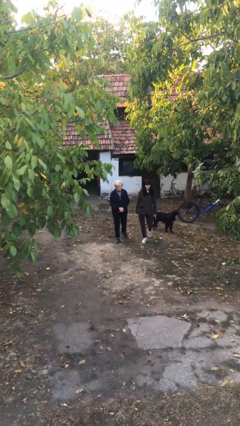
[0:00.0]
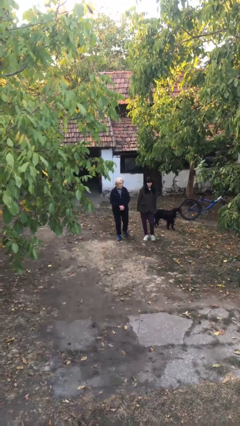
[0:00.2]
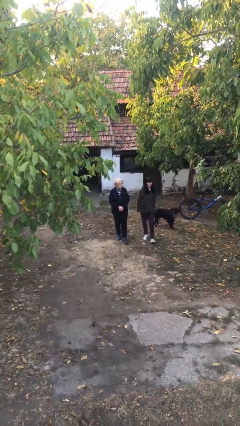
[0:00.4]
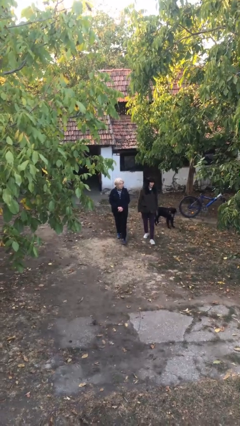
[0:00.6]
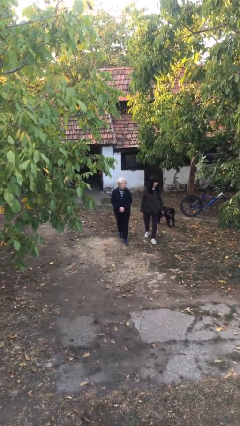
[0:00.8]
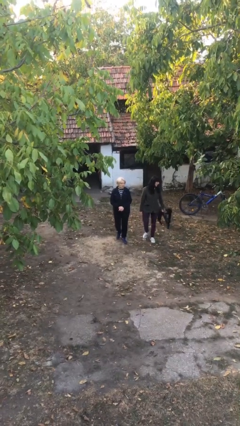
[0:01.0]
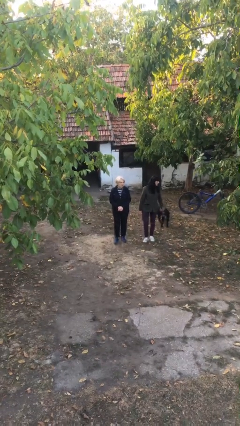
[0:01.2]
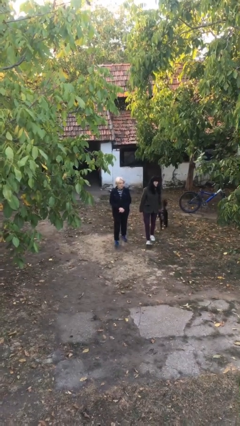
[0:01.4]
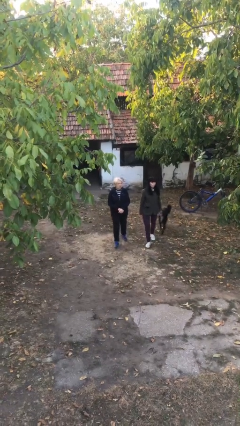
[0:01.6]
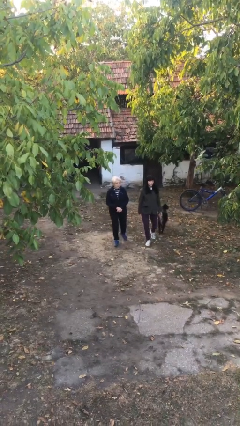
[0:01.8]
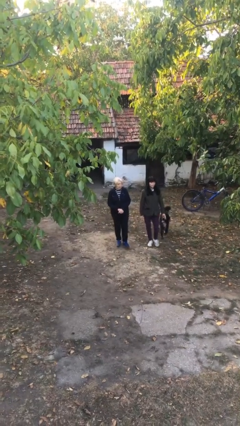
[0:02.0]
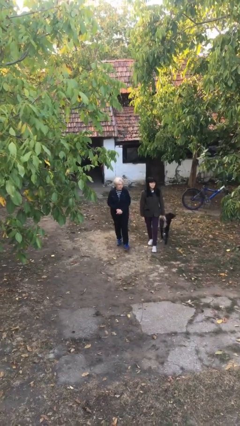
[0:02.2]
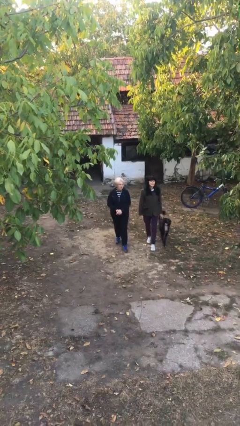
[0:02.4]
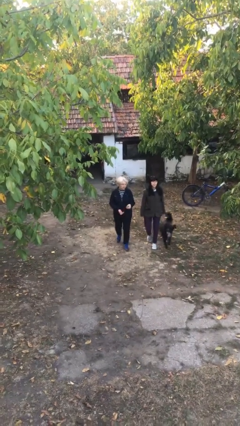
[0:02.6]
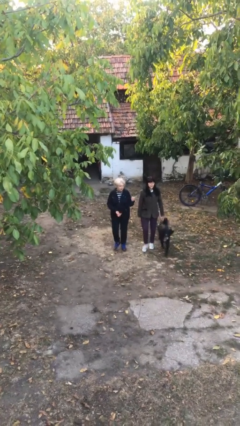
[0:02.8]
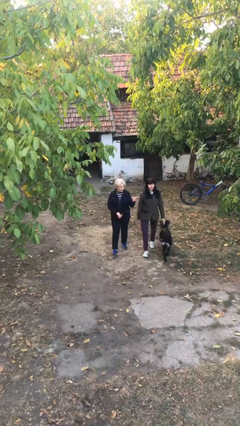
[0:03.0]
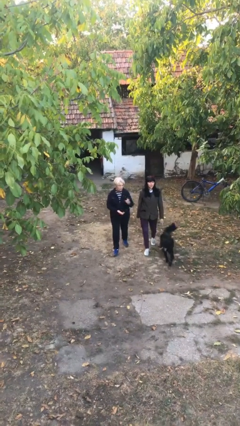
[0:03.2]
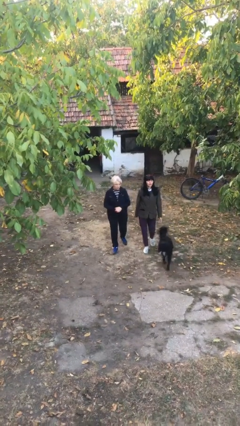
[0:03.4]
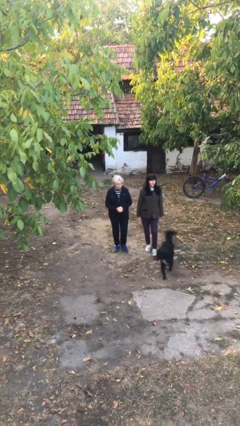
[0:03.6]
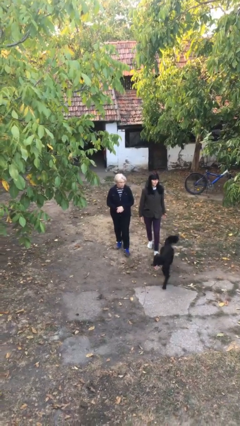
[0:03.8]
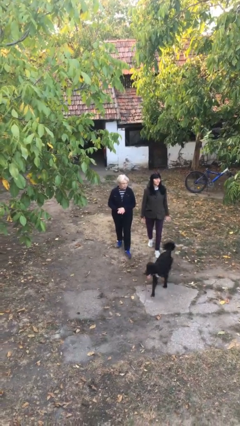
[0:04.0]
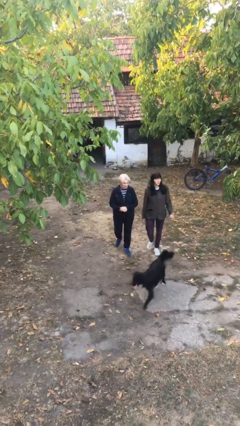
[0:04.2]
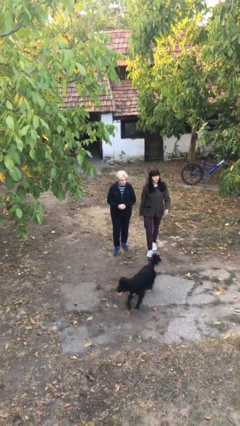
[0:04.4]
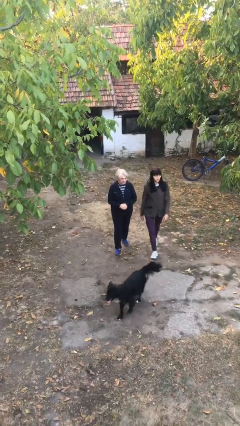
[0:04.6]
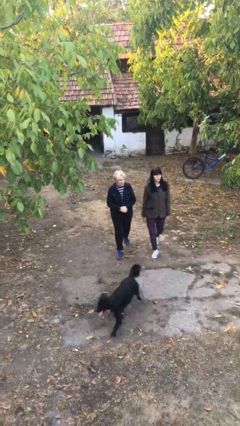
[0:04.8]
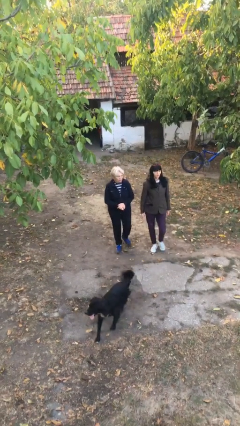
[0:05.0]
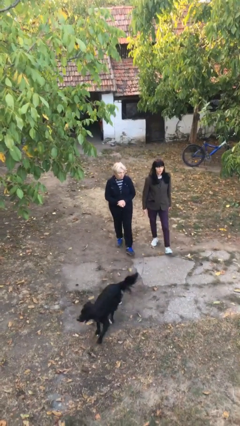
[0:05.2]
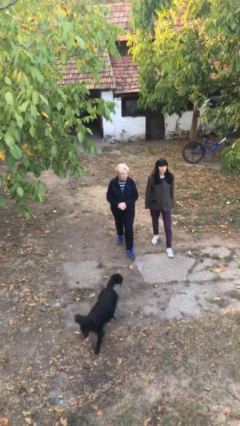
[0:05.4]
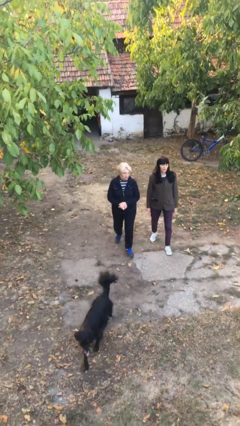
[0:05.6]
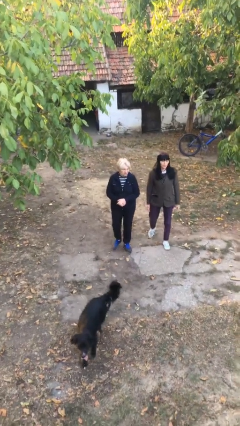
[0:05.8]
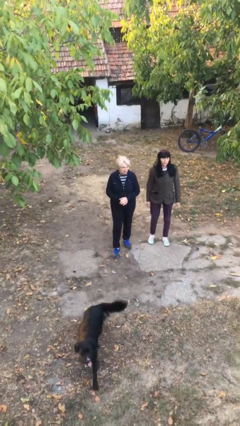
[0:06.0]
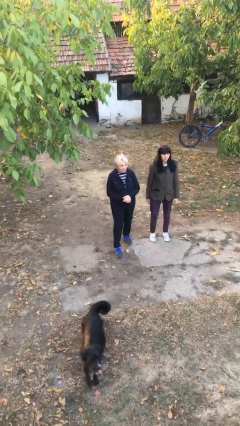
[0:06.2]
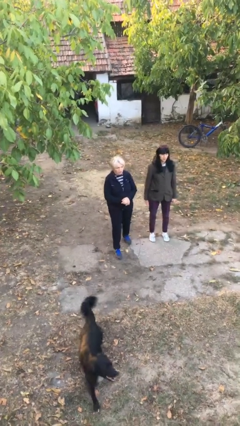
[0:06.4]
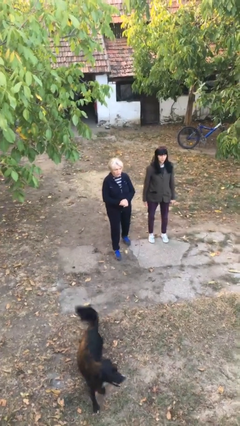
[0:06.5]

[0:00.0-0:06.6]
person talks to person

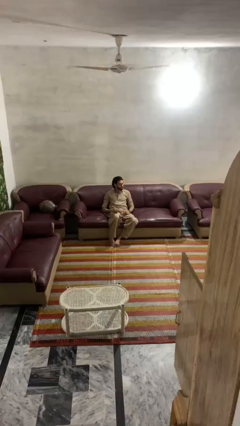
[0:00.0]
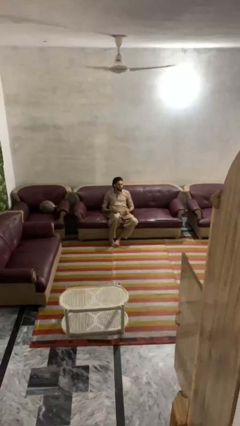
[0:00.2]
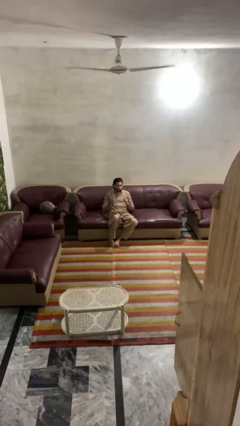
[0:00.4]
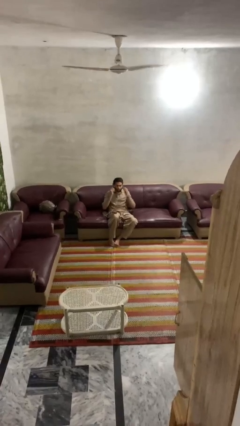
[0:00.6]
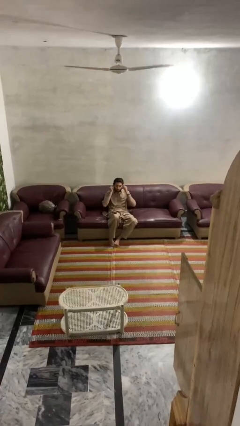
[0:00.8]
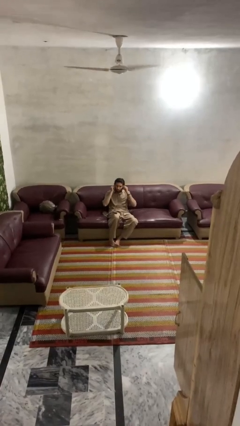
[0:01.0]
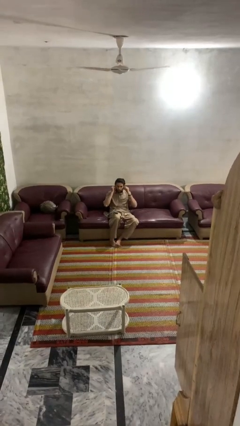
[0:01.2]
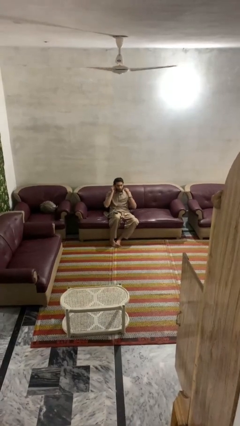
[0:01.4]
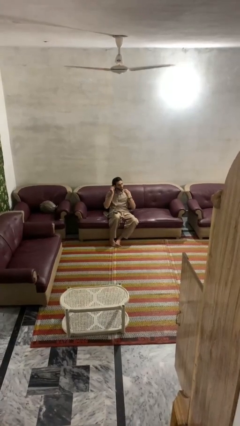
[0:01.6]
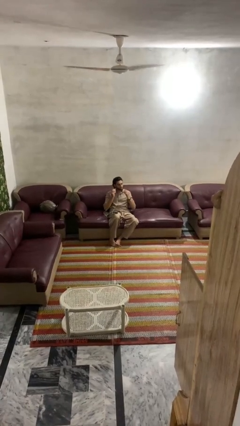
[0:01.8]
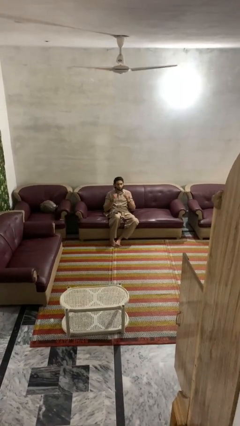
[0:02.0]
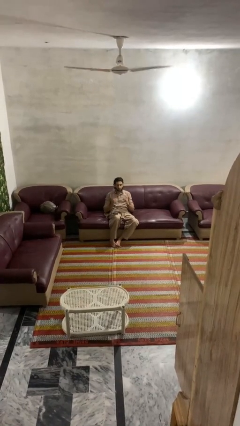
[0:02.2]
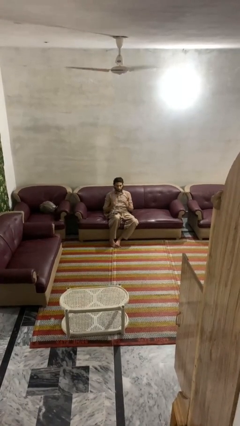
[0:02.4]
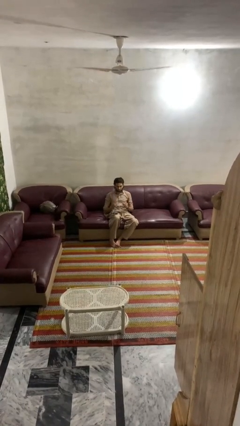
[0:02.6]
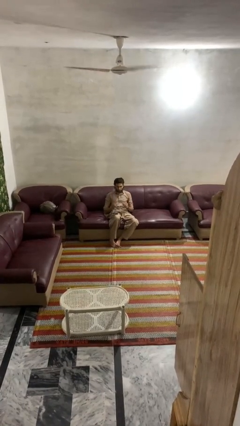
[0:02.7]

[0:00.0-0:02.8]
person takes off headphones

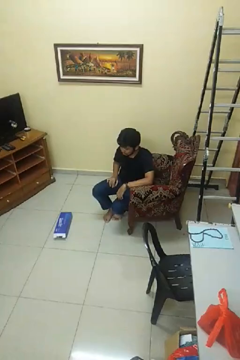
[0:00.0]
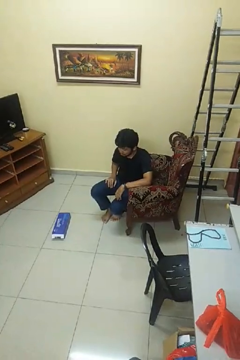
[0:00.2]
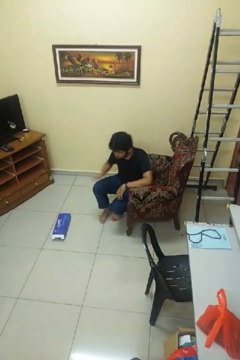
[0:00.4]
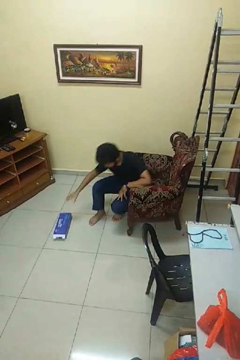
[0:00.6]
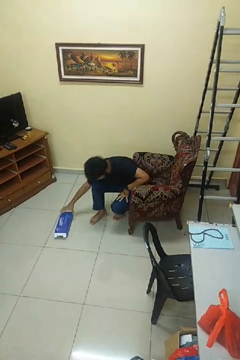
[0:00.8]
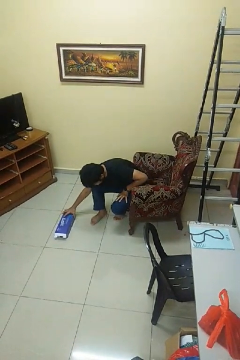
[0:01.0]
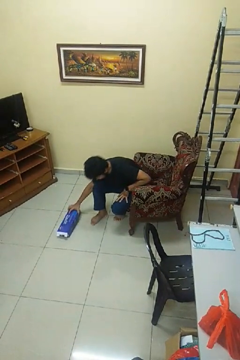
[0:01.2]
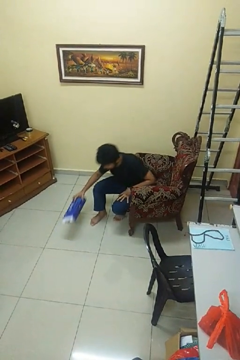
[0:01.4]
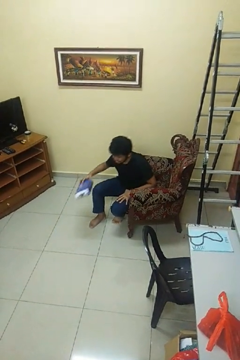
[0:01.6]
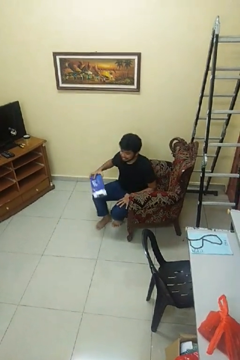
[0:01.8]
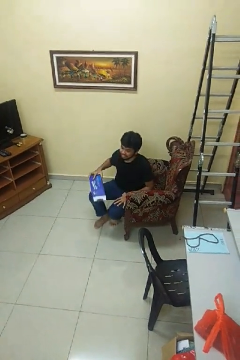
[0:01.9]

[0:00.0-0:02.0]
person picks up object from floor

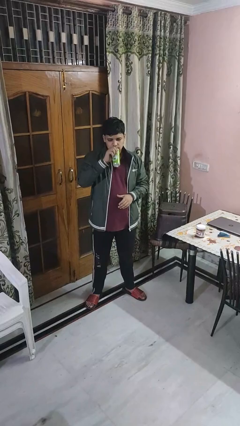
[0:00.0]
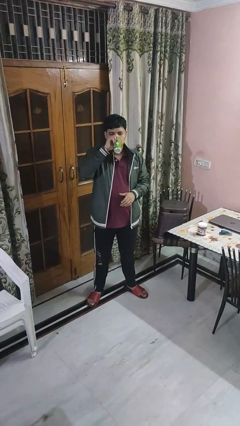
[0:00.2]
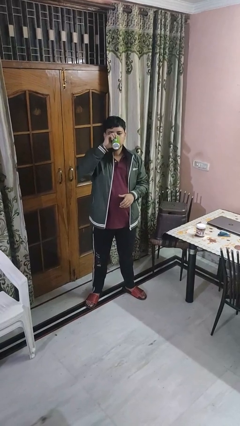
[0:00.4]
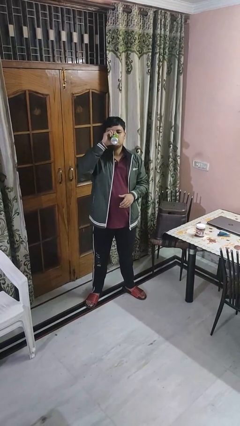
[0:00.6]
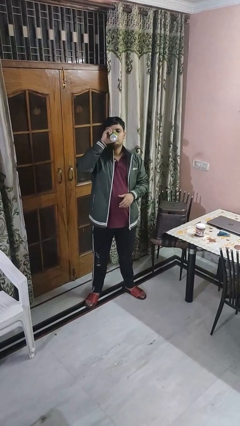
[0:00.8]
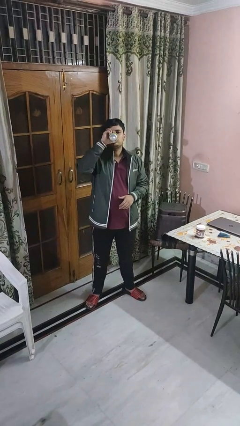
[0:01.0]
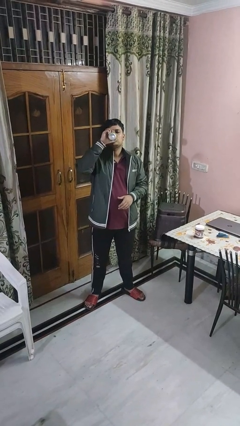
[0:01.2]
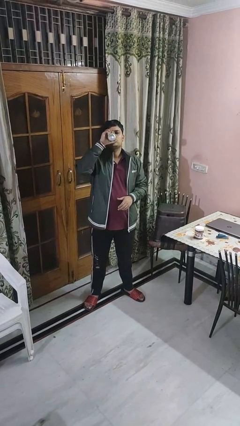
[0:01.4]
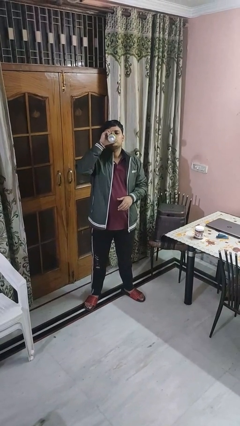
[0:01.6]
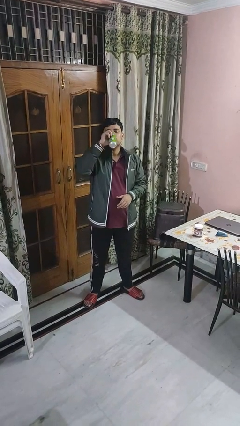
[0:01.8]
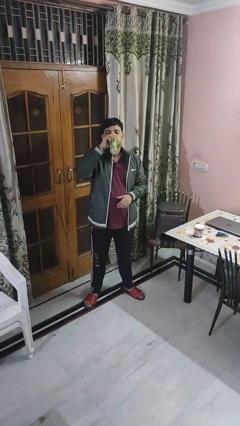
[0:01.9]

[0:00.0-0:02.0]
person drinks from beverage can

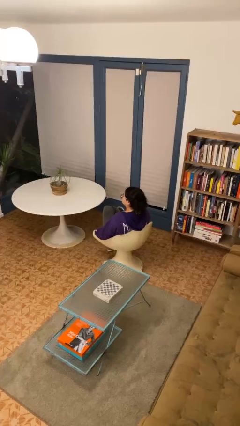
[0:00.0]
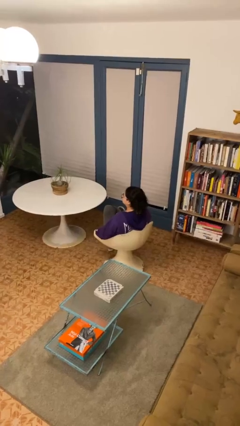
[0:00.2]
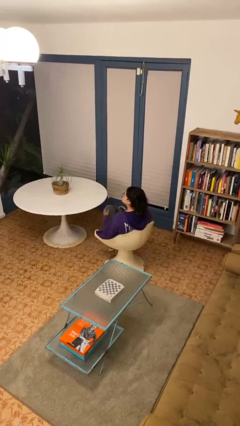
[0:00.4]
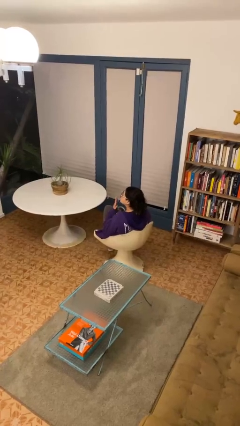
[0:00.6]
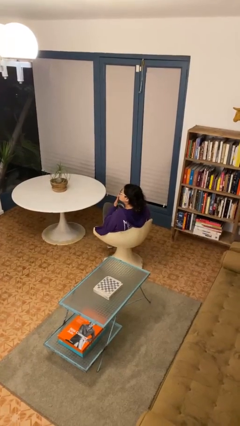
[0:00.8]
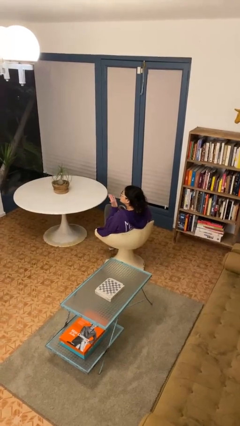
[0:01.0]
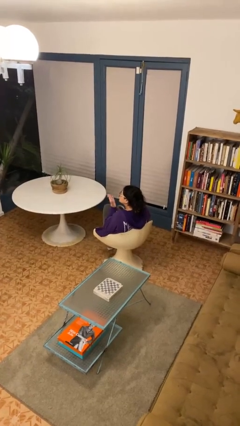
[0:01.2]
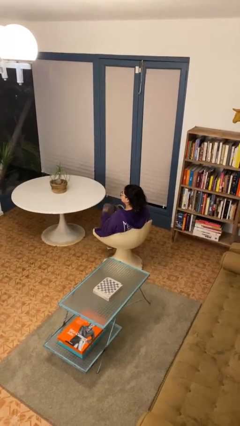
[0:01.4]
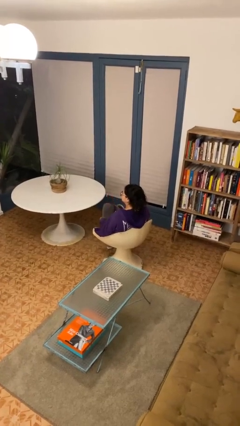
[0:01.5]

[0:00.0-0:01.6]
person gestures blow kiss

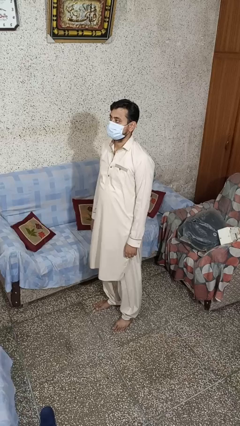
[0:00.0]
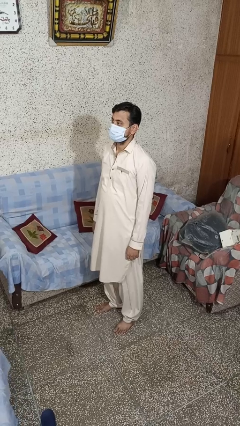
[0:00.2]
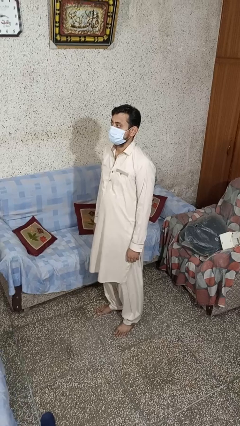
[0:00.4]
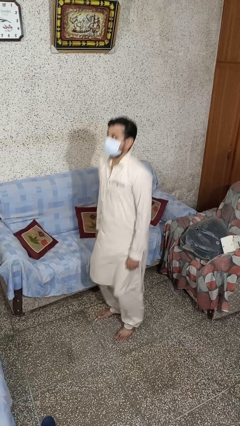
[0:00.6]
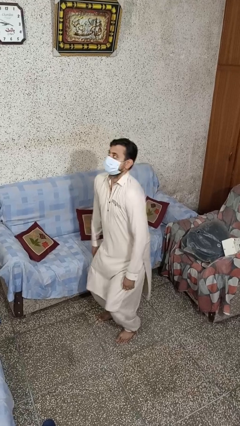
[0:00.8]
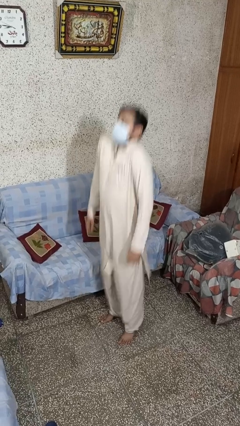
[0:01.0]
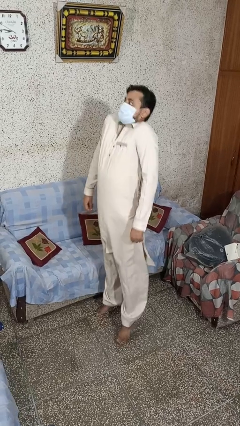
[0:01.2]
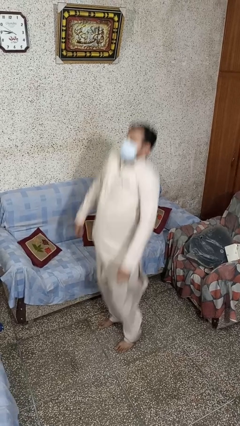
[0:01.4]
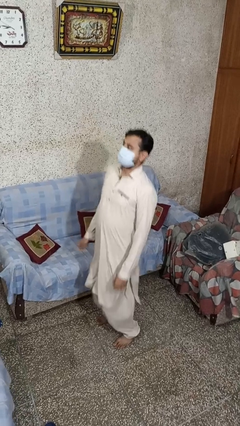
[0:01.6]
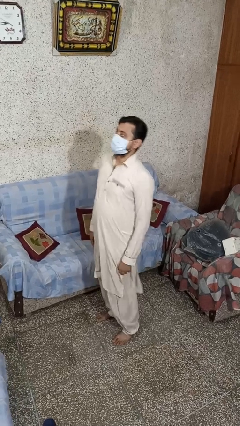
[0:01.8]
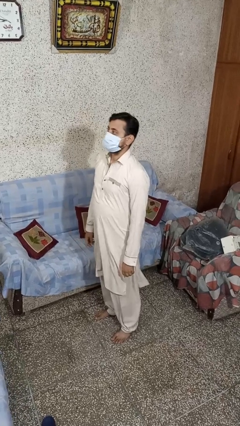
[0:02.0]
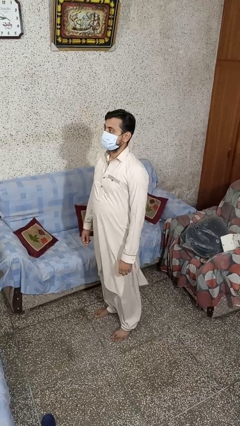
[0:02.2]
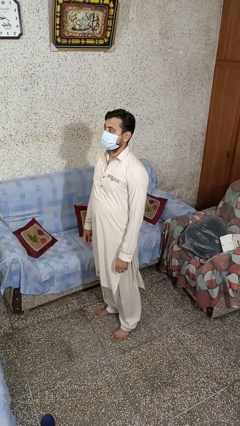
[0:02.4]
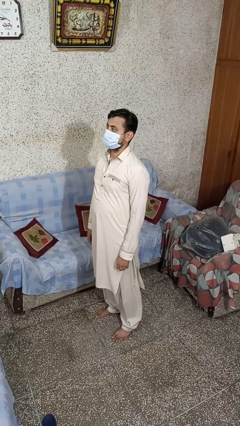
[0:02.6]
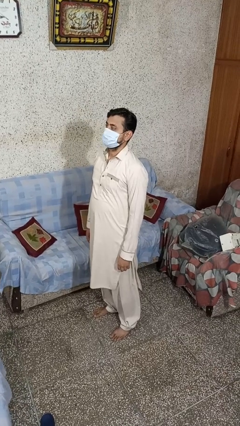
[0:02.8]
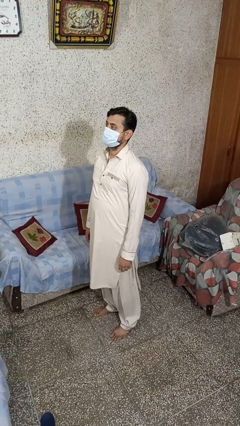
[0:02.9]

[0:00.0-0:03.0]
person jumps
